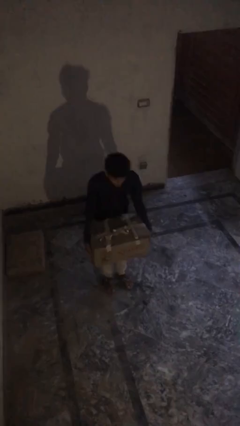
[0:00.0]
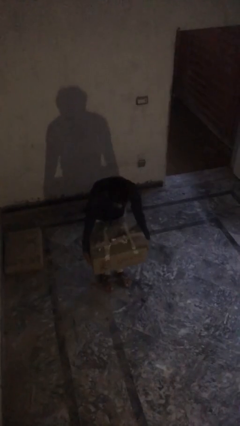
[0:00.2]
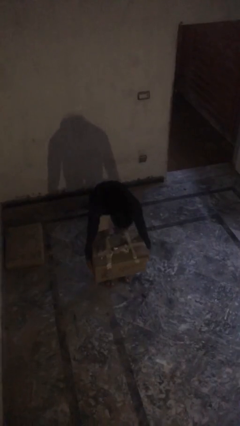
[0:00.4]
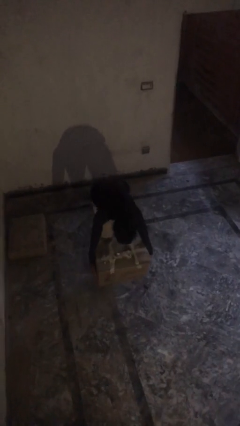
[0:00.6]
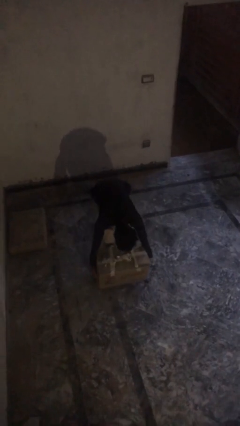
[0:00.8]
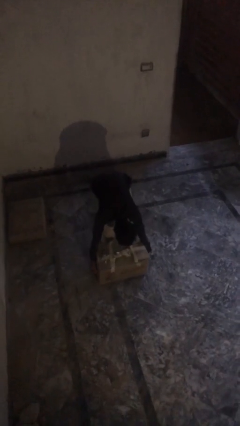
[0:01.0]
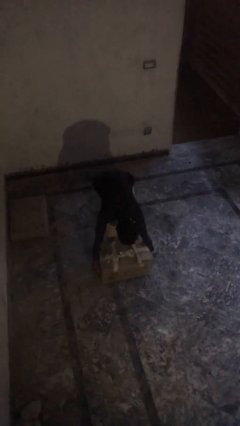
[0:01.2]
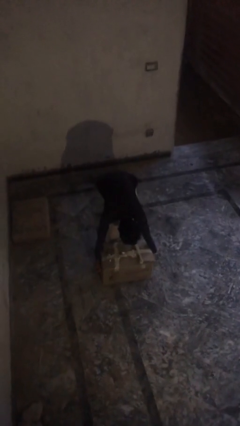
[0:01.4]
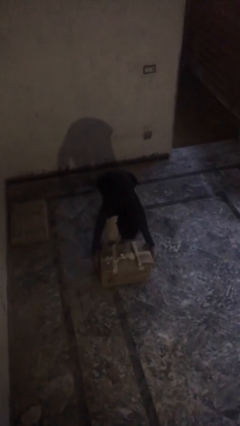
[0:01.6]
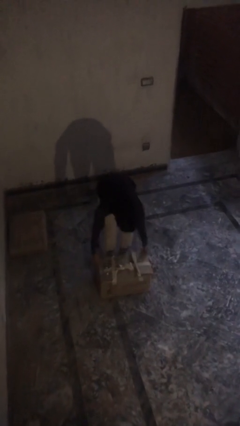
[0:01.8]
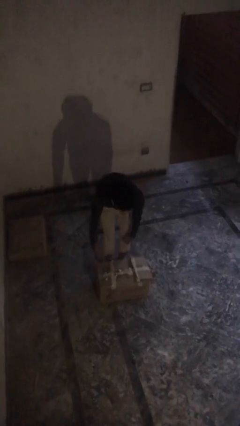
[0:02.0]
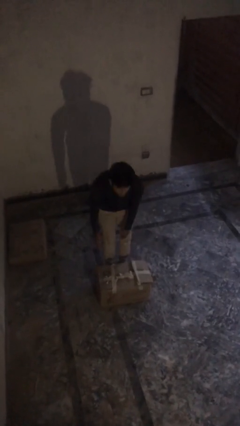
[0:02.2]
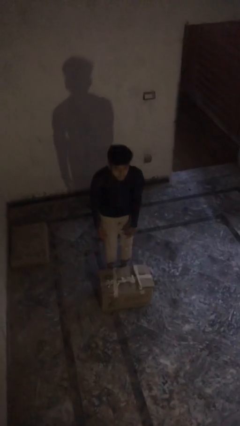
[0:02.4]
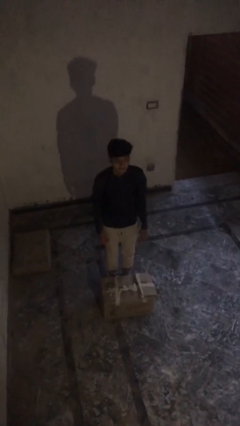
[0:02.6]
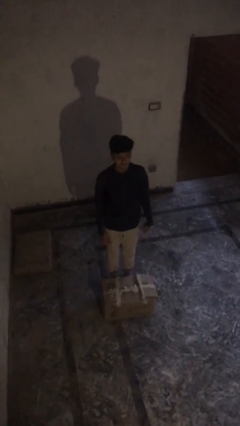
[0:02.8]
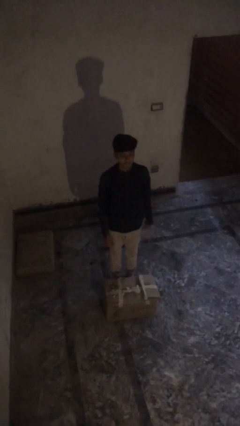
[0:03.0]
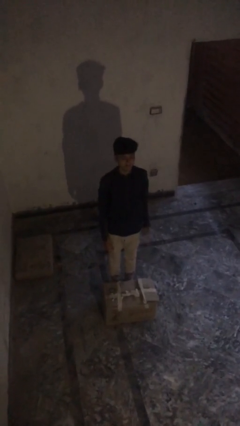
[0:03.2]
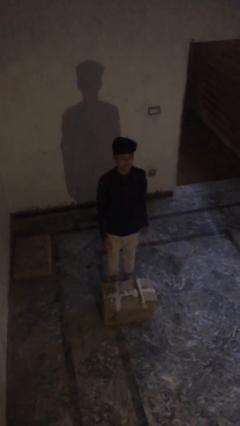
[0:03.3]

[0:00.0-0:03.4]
person puts down object on floor

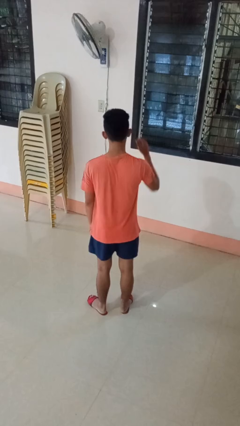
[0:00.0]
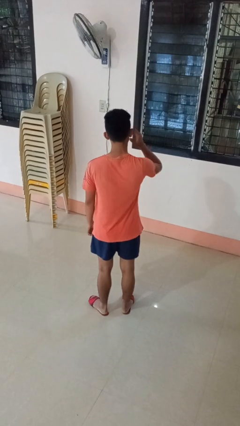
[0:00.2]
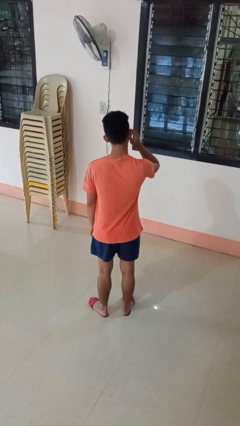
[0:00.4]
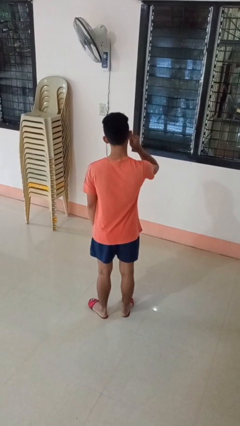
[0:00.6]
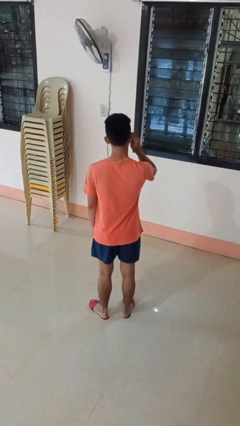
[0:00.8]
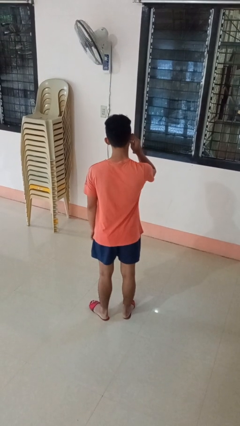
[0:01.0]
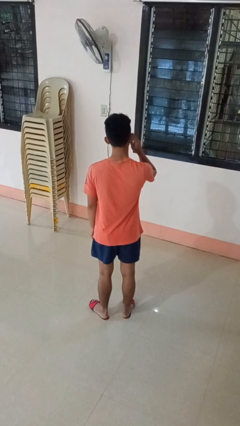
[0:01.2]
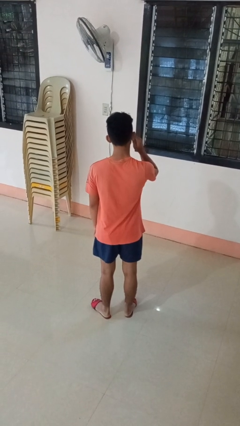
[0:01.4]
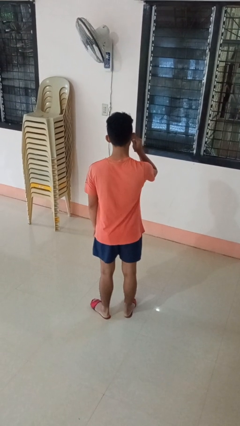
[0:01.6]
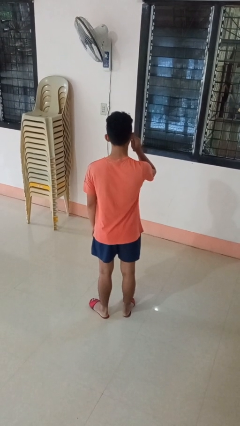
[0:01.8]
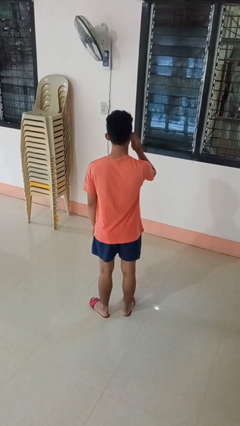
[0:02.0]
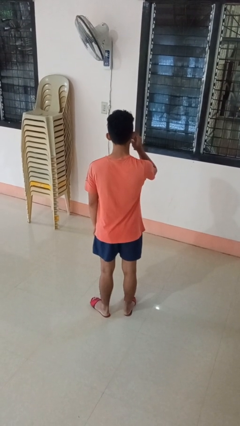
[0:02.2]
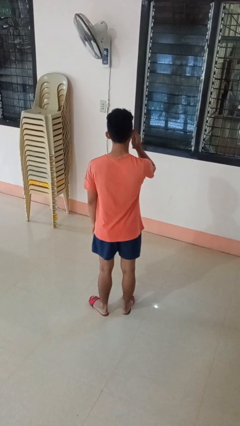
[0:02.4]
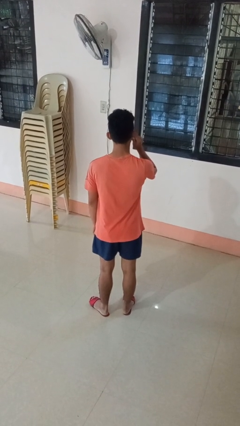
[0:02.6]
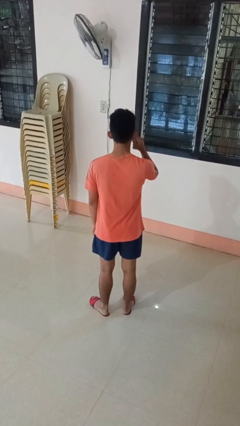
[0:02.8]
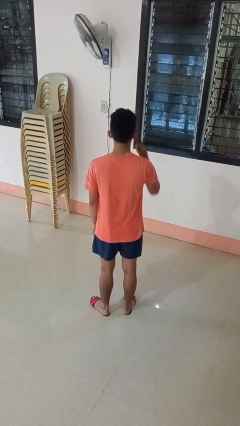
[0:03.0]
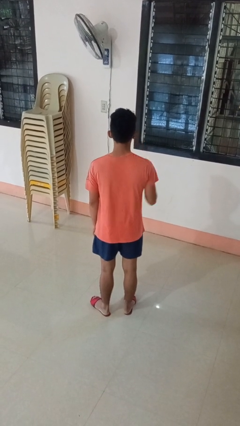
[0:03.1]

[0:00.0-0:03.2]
person touches earlobe

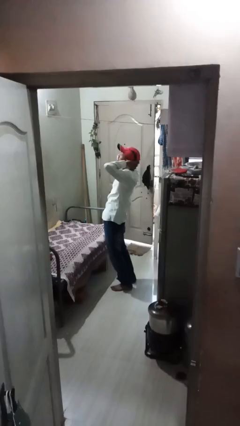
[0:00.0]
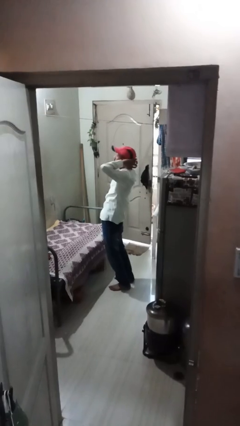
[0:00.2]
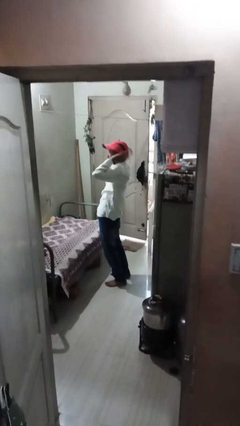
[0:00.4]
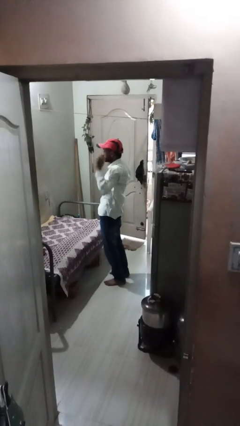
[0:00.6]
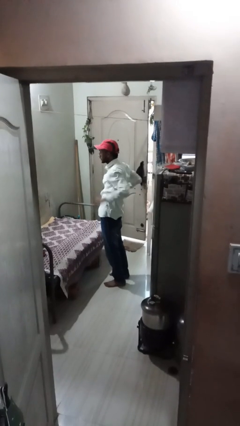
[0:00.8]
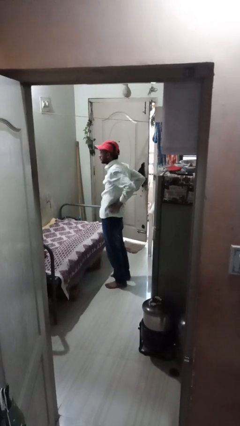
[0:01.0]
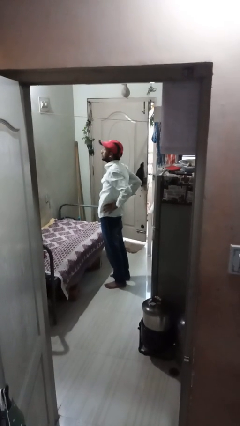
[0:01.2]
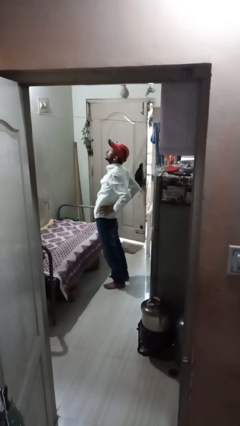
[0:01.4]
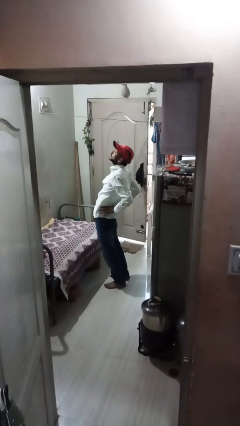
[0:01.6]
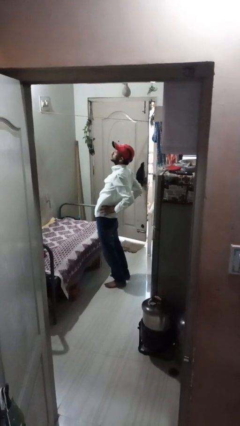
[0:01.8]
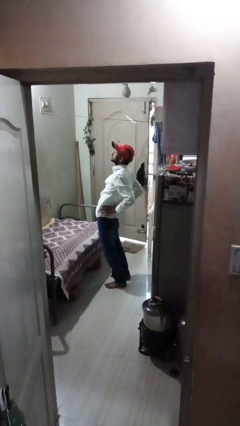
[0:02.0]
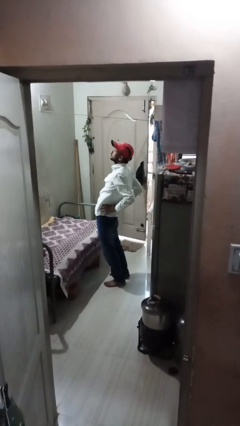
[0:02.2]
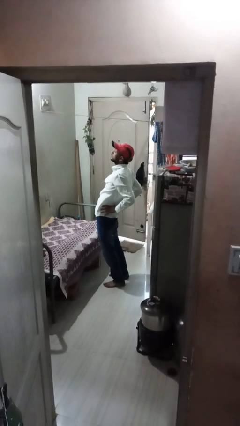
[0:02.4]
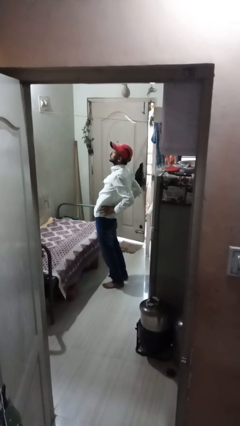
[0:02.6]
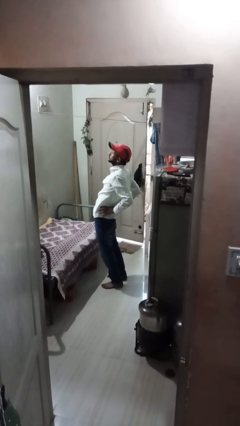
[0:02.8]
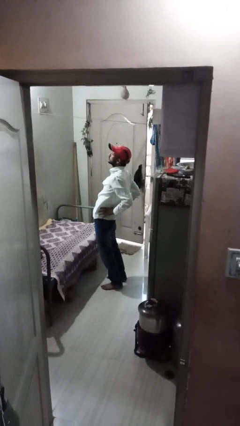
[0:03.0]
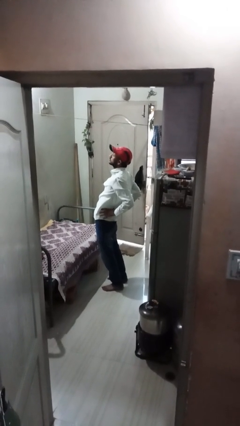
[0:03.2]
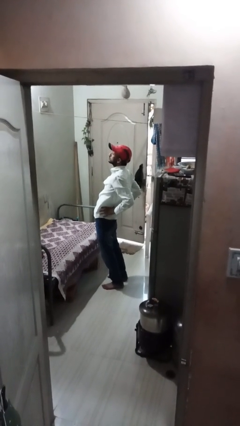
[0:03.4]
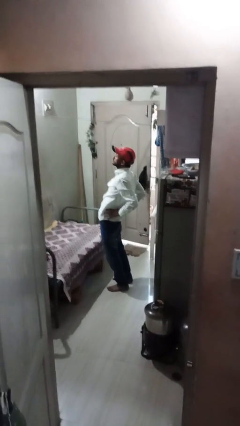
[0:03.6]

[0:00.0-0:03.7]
person stretches back

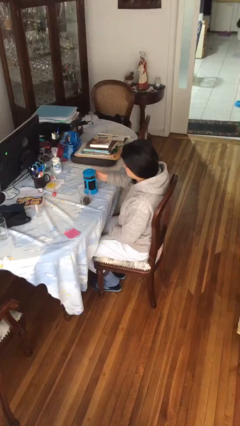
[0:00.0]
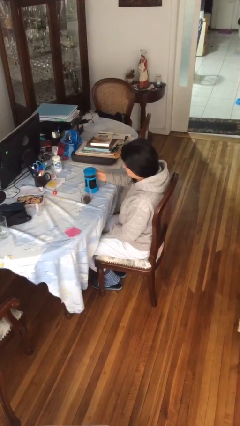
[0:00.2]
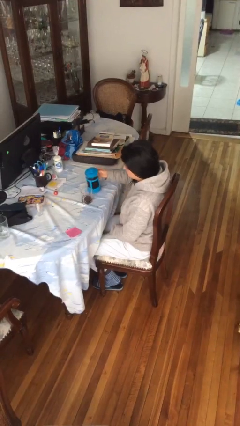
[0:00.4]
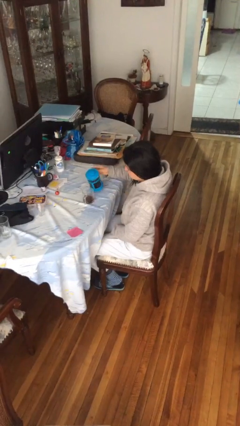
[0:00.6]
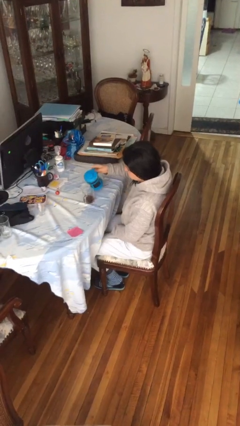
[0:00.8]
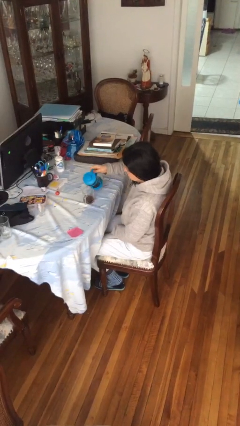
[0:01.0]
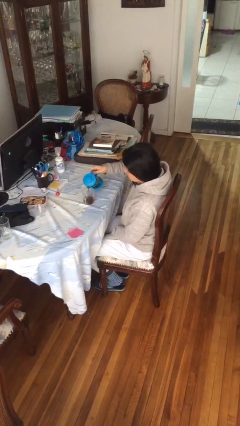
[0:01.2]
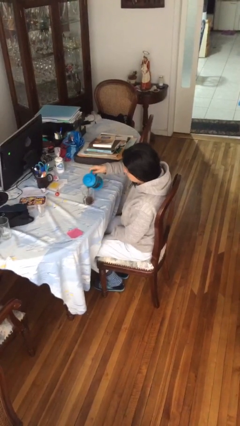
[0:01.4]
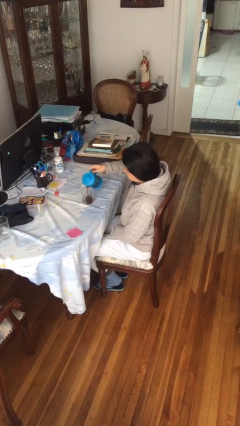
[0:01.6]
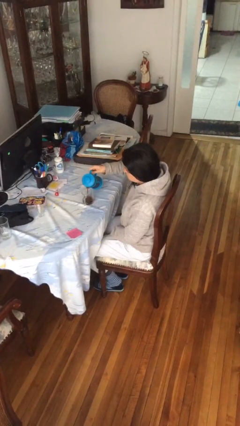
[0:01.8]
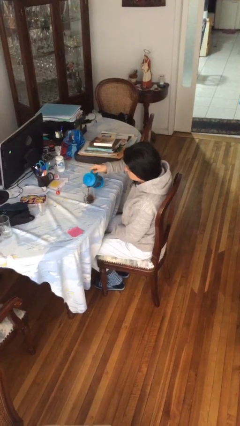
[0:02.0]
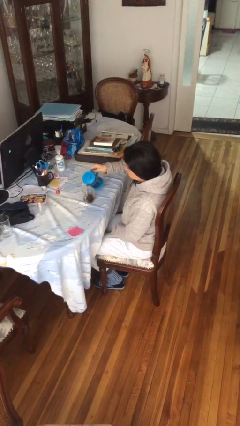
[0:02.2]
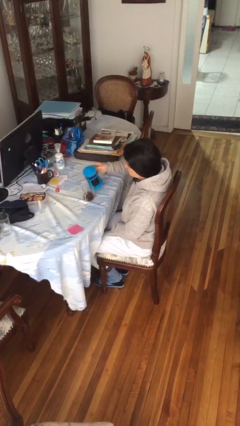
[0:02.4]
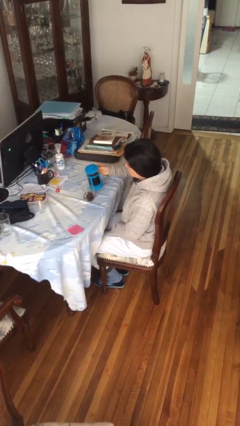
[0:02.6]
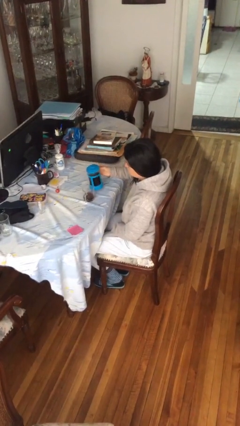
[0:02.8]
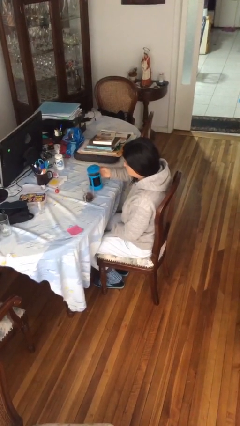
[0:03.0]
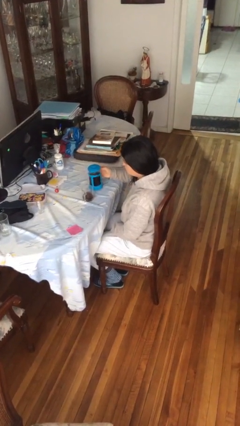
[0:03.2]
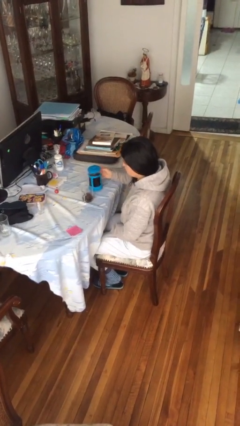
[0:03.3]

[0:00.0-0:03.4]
person pours coffee into mug

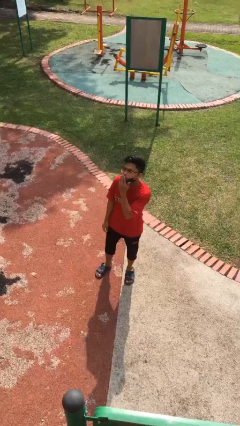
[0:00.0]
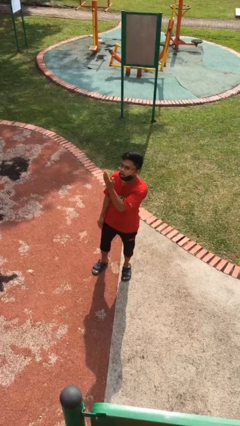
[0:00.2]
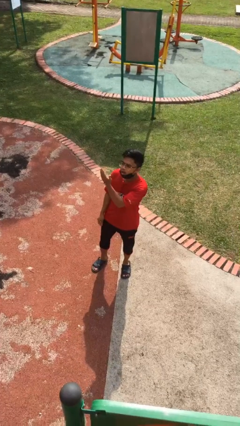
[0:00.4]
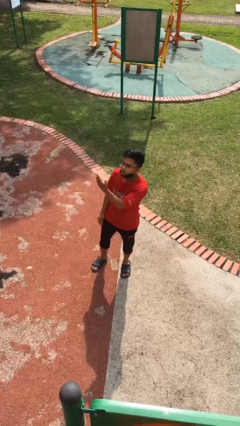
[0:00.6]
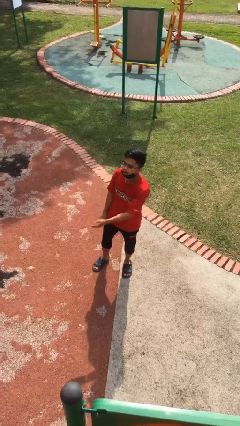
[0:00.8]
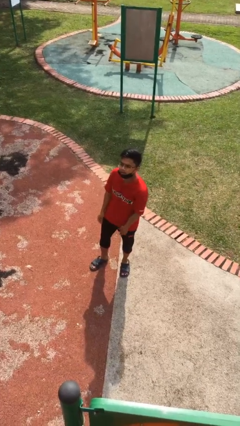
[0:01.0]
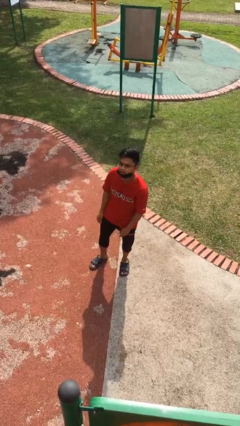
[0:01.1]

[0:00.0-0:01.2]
person gestures blow kiss

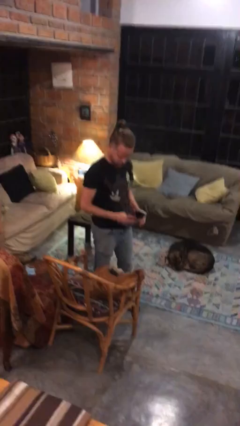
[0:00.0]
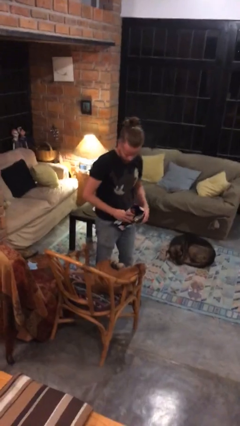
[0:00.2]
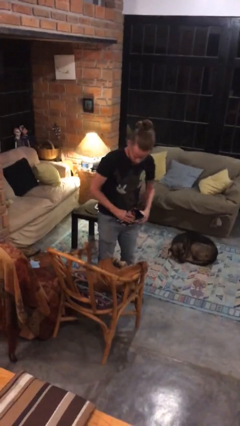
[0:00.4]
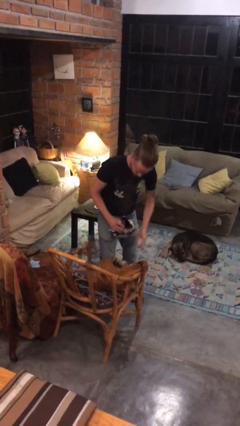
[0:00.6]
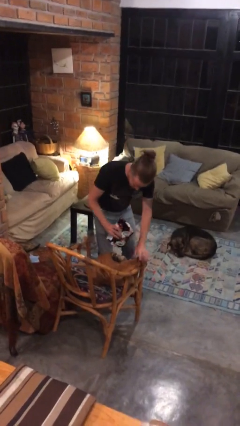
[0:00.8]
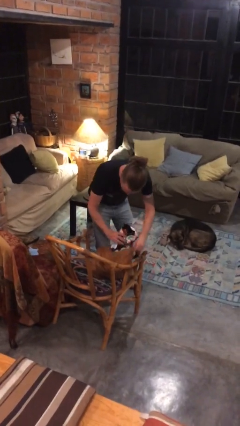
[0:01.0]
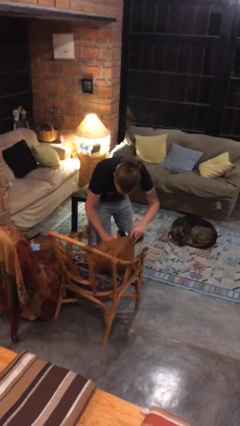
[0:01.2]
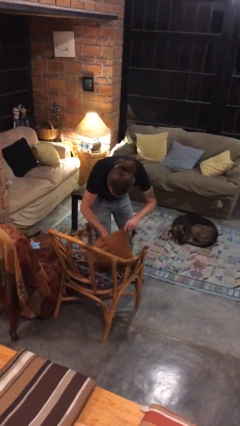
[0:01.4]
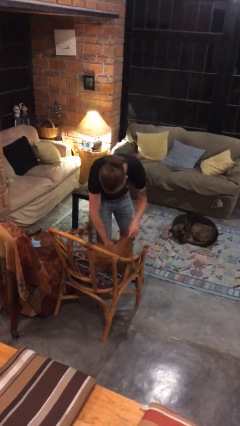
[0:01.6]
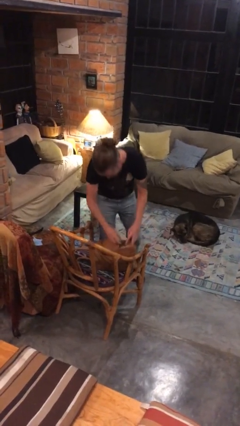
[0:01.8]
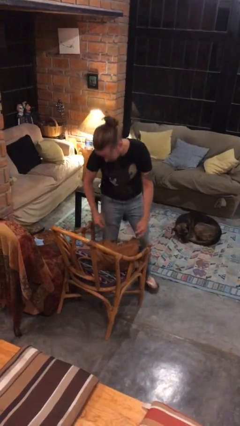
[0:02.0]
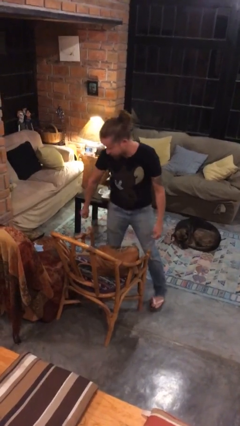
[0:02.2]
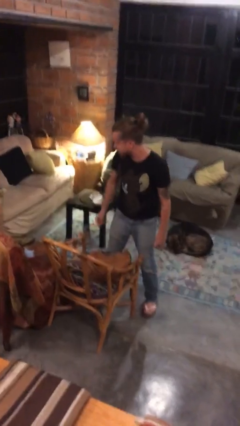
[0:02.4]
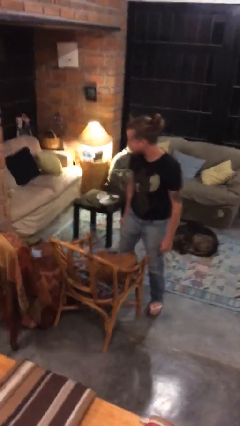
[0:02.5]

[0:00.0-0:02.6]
person puts object into purse
